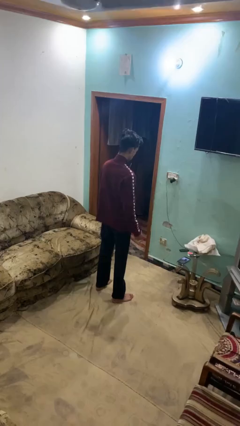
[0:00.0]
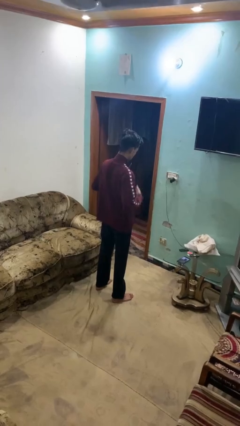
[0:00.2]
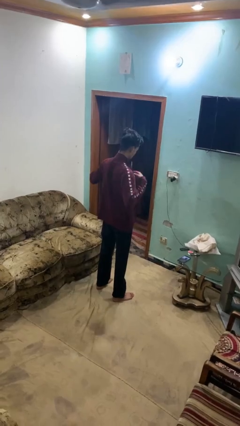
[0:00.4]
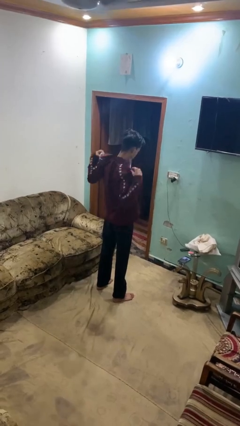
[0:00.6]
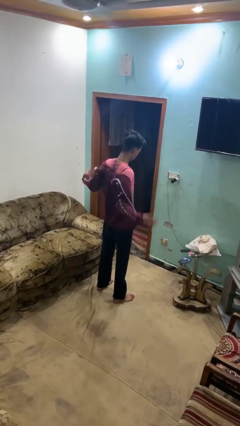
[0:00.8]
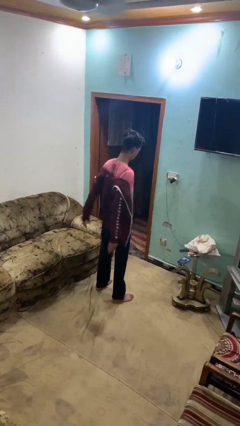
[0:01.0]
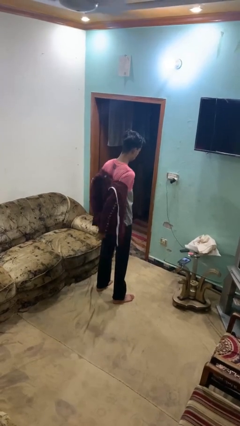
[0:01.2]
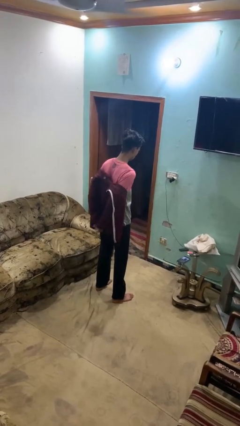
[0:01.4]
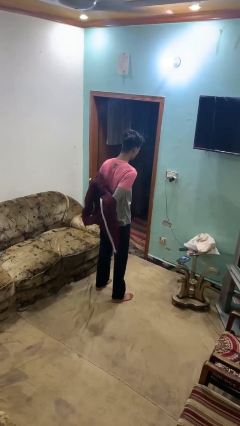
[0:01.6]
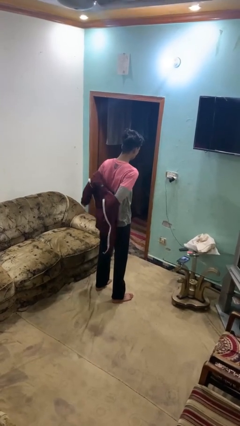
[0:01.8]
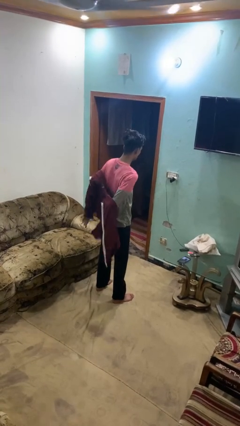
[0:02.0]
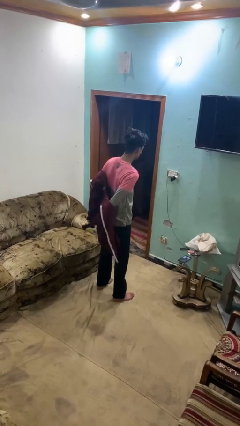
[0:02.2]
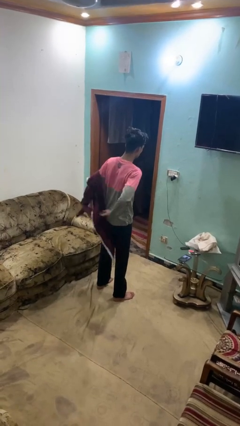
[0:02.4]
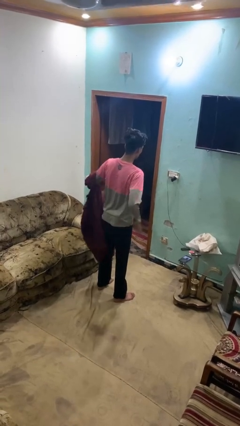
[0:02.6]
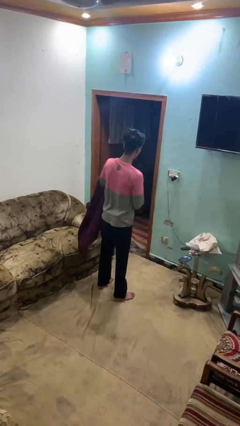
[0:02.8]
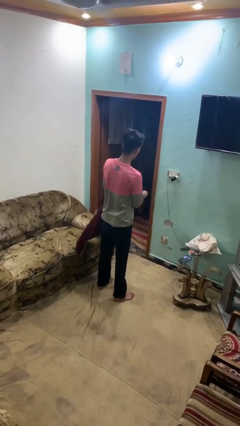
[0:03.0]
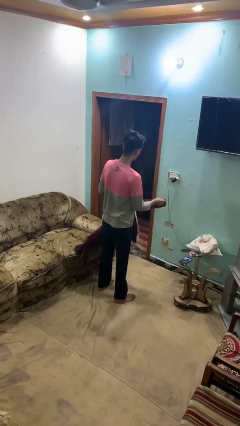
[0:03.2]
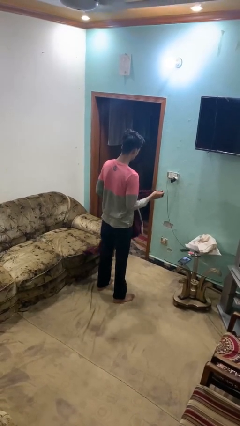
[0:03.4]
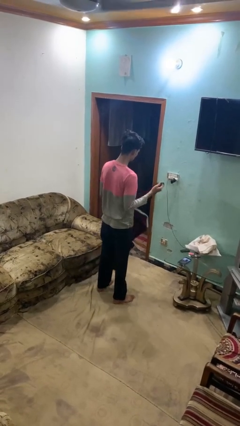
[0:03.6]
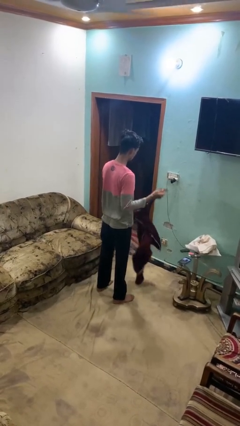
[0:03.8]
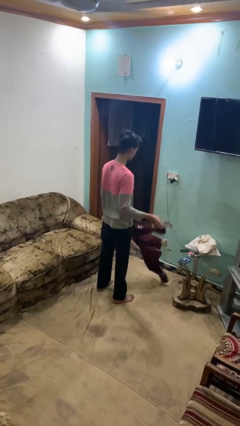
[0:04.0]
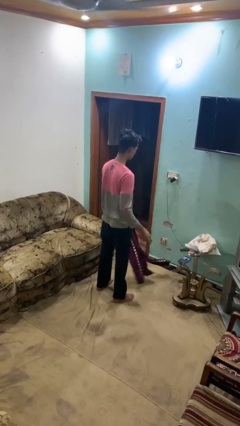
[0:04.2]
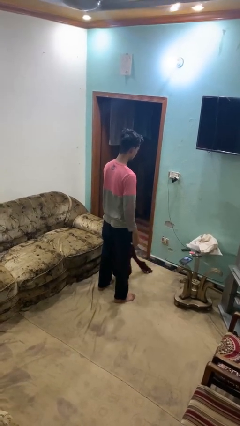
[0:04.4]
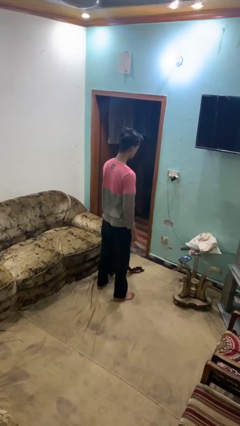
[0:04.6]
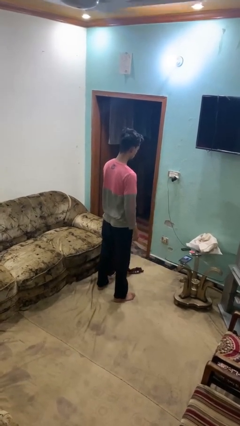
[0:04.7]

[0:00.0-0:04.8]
person takes off jacket

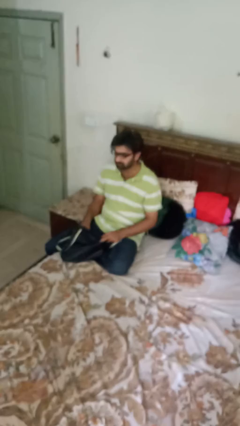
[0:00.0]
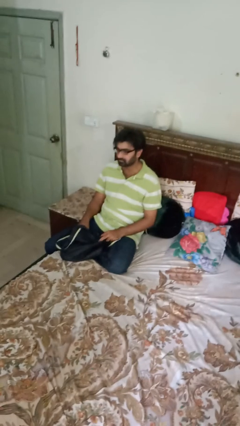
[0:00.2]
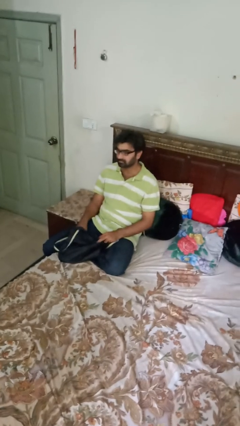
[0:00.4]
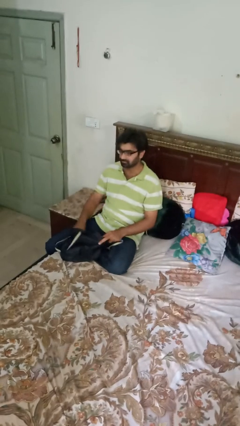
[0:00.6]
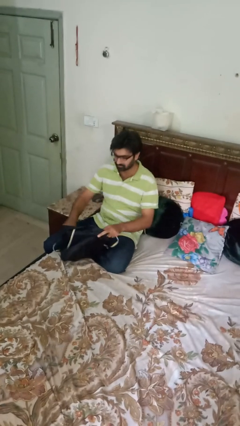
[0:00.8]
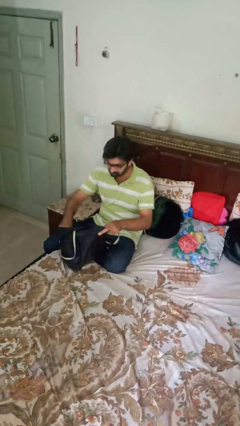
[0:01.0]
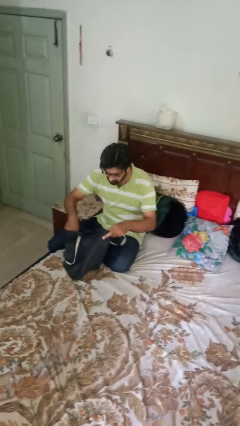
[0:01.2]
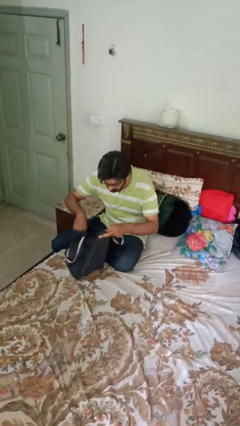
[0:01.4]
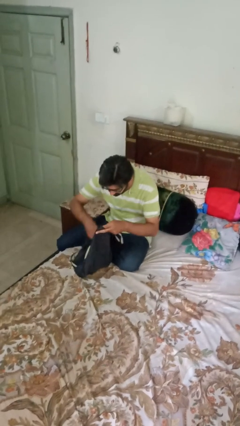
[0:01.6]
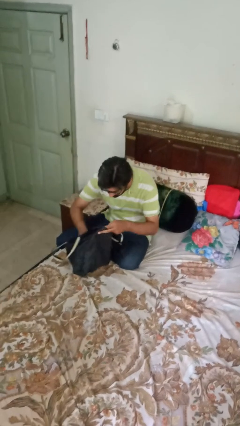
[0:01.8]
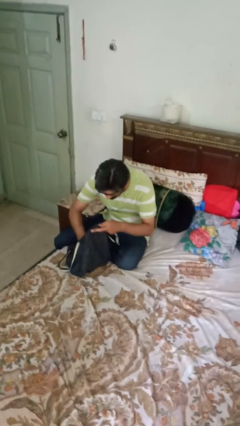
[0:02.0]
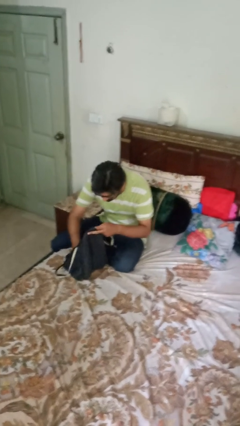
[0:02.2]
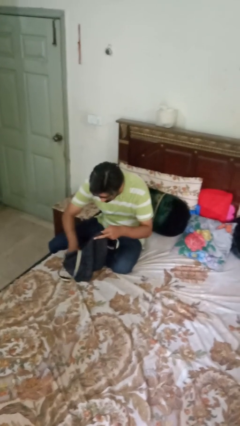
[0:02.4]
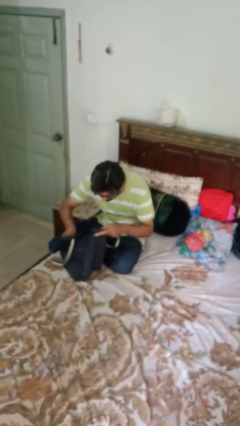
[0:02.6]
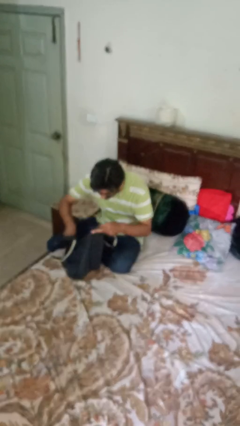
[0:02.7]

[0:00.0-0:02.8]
person searches in bag

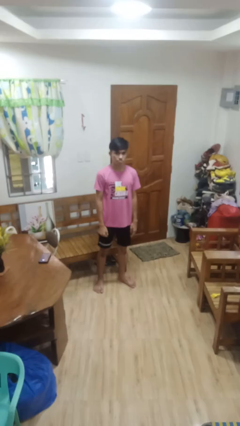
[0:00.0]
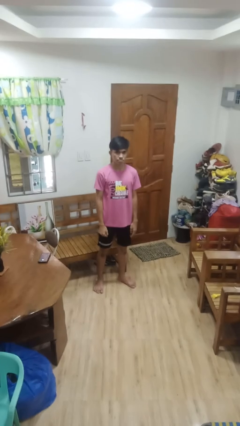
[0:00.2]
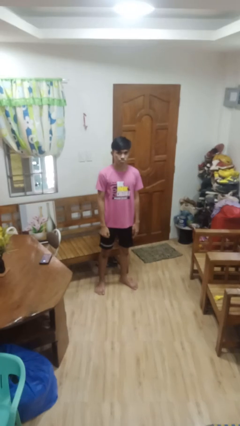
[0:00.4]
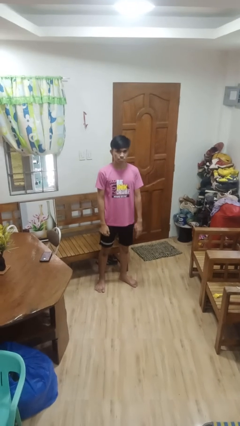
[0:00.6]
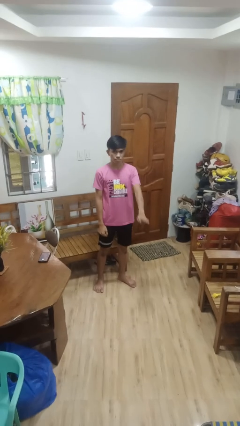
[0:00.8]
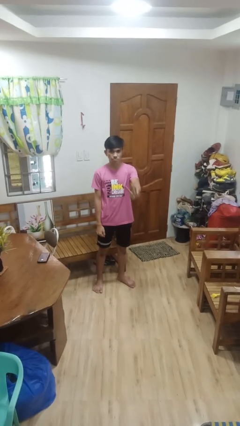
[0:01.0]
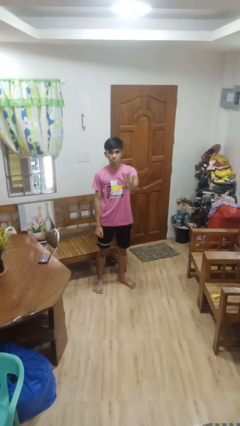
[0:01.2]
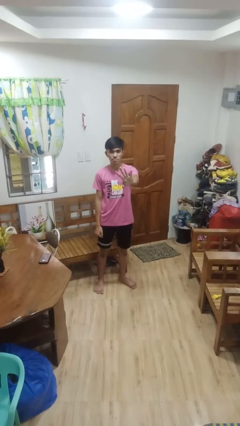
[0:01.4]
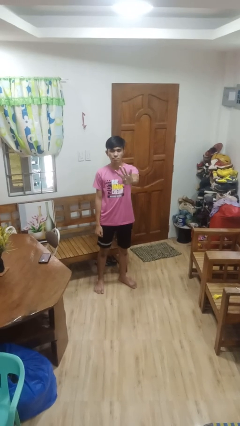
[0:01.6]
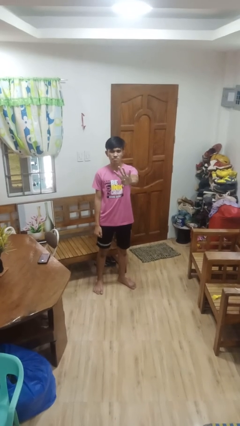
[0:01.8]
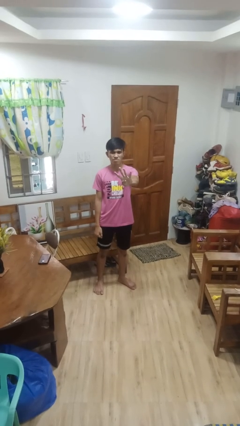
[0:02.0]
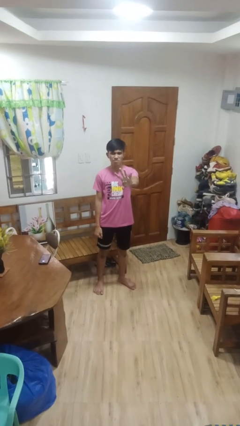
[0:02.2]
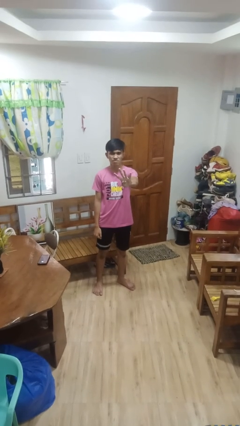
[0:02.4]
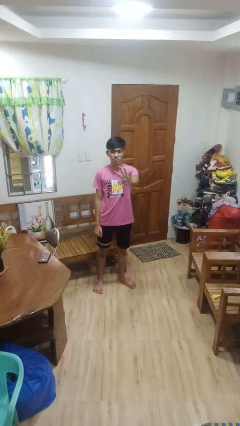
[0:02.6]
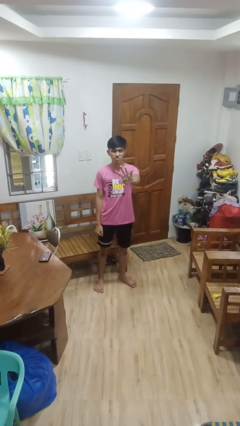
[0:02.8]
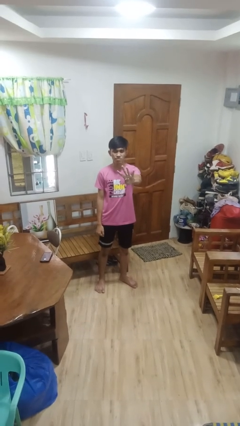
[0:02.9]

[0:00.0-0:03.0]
person gestures number four

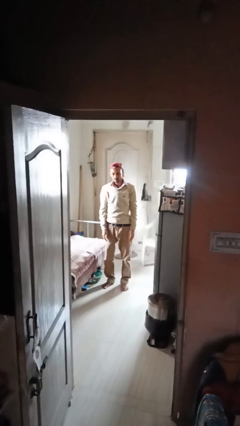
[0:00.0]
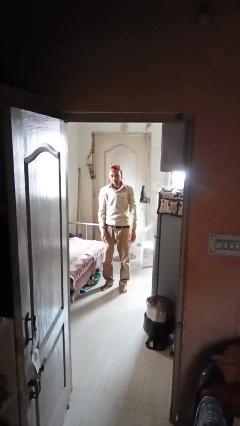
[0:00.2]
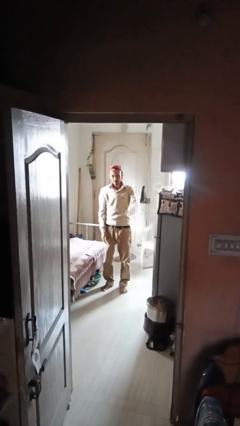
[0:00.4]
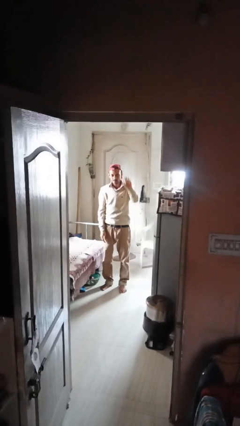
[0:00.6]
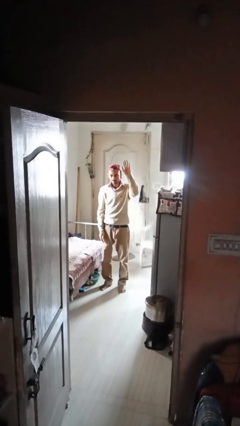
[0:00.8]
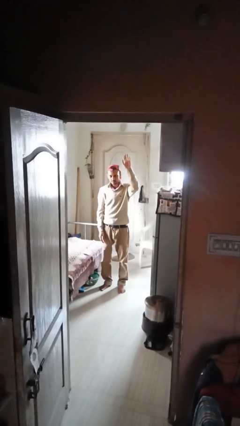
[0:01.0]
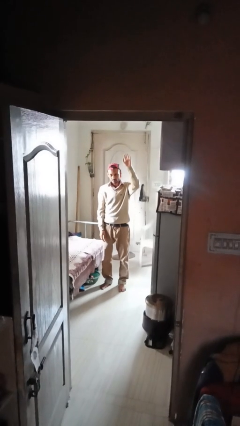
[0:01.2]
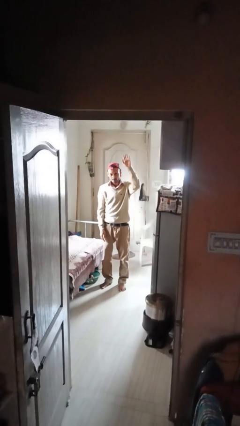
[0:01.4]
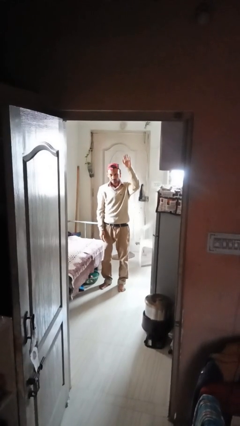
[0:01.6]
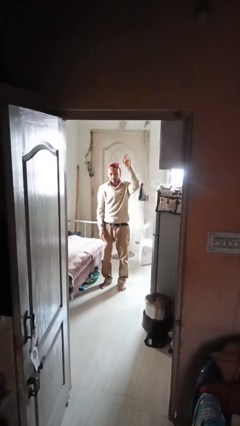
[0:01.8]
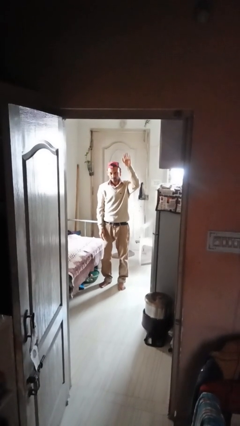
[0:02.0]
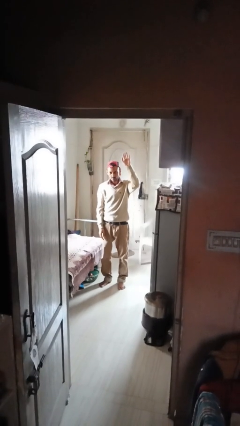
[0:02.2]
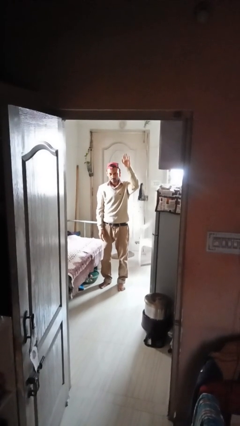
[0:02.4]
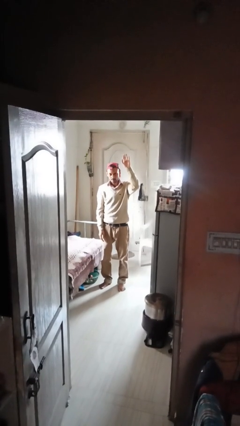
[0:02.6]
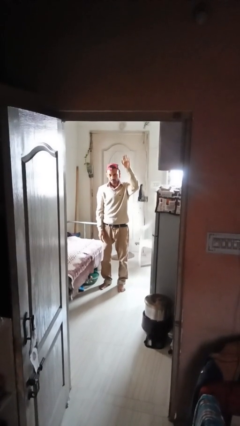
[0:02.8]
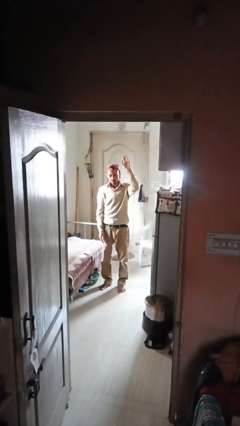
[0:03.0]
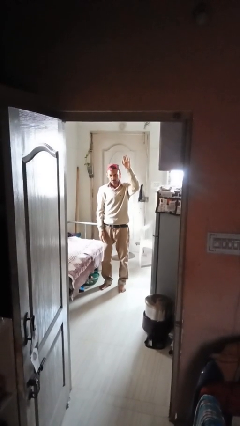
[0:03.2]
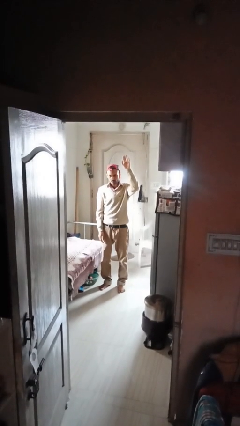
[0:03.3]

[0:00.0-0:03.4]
person gestures raise hand

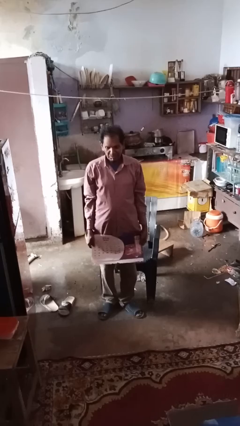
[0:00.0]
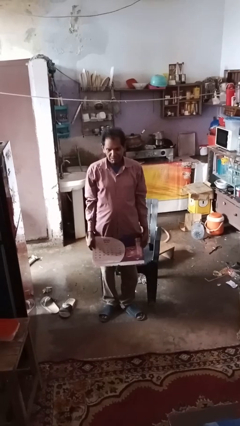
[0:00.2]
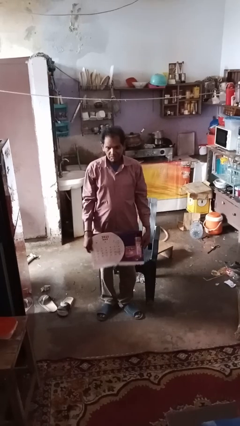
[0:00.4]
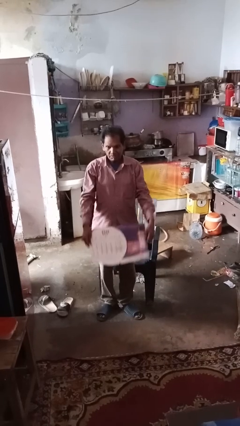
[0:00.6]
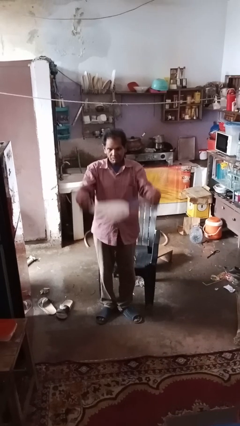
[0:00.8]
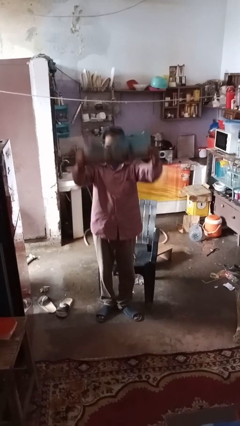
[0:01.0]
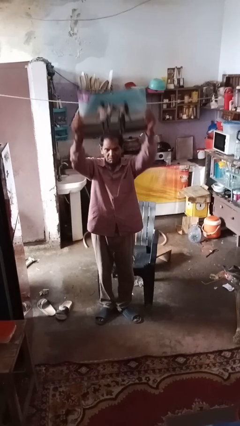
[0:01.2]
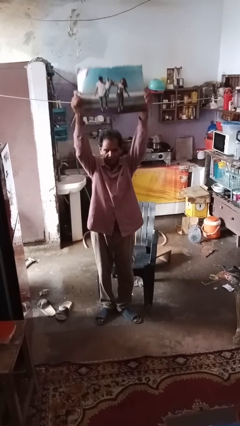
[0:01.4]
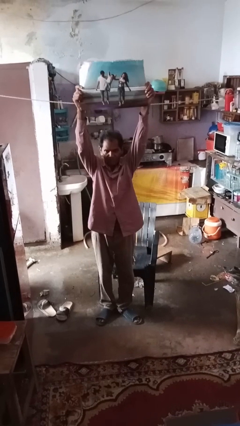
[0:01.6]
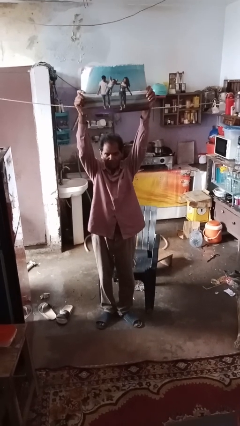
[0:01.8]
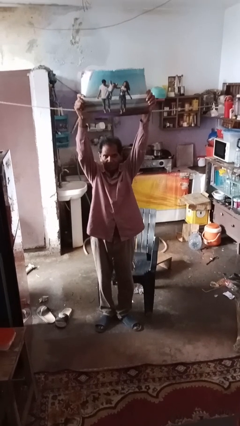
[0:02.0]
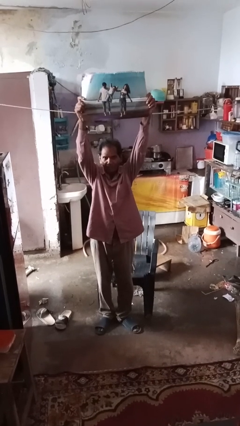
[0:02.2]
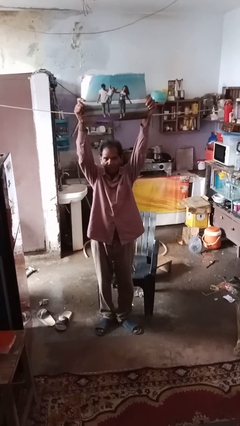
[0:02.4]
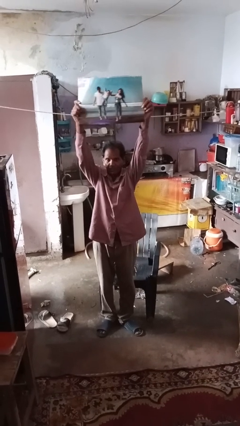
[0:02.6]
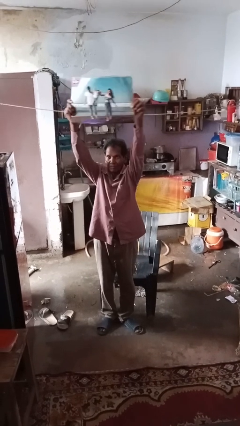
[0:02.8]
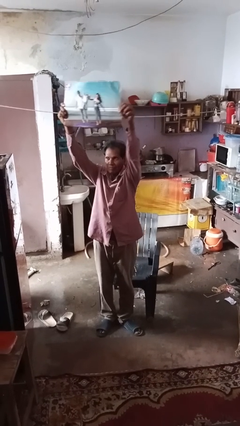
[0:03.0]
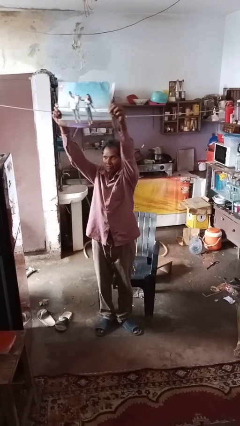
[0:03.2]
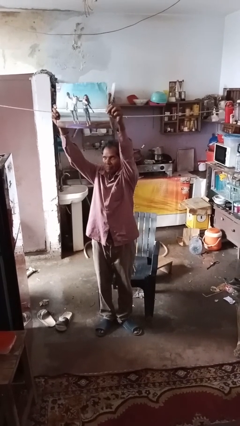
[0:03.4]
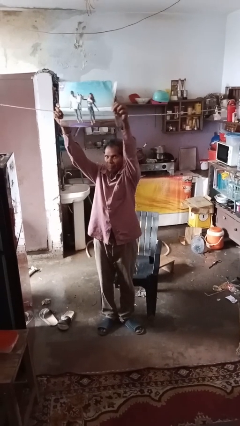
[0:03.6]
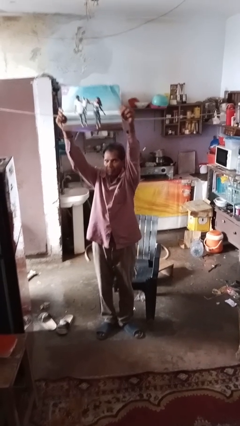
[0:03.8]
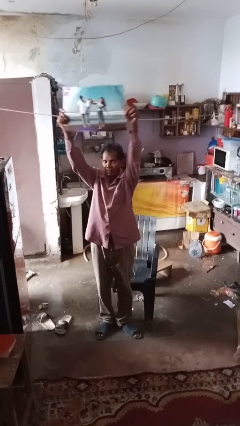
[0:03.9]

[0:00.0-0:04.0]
person holds object above head
